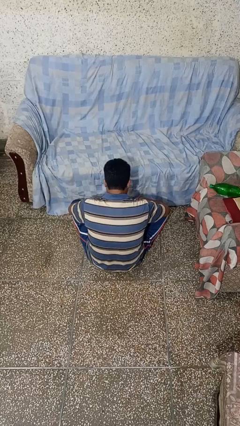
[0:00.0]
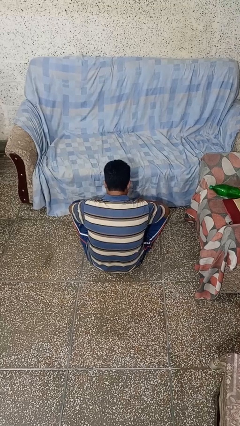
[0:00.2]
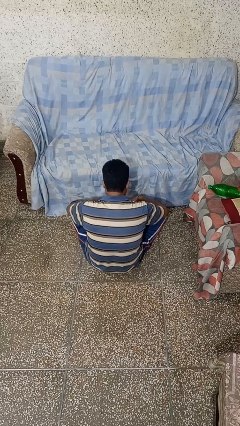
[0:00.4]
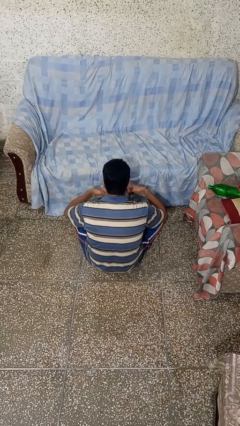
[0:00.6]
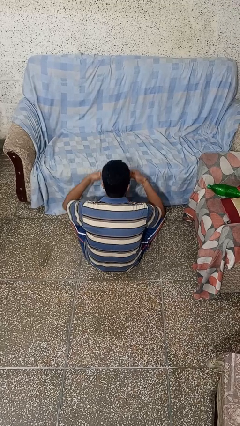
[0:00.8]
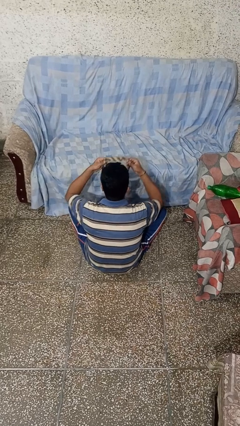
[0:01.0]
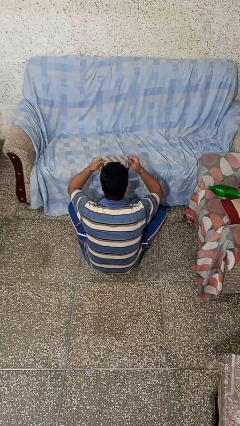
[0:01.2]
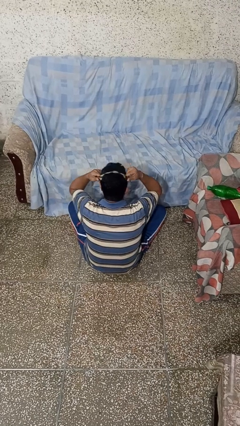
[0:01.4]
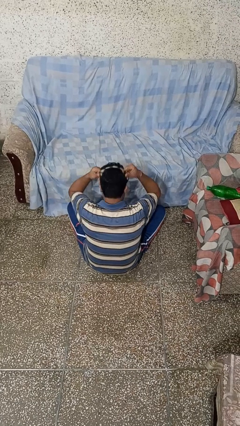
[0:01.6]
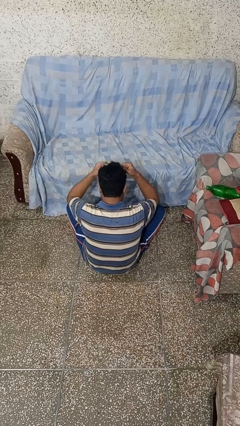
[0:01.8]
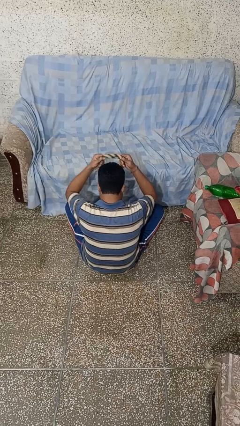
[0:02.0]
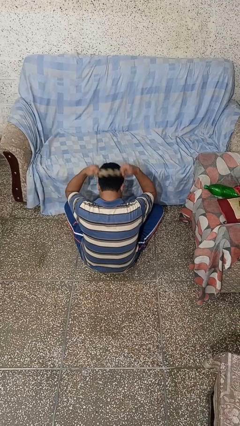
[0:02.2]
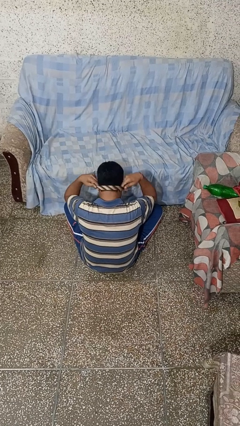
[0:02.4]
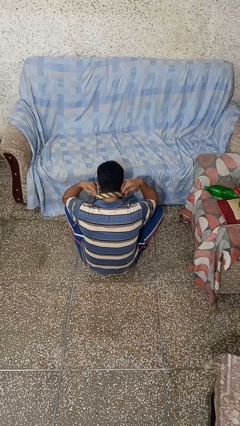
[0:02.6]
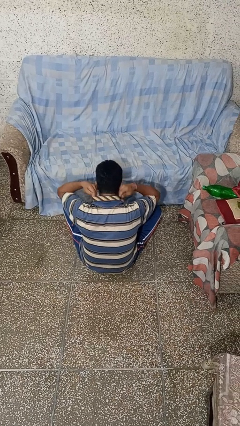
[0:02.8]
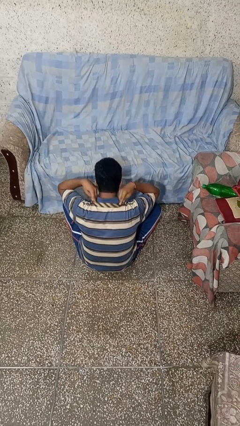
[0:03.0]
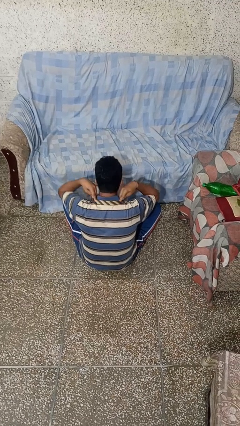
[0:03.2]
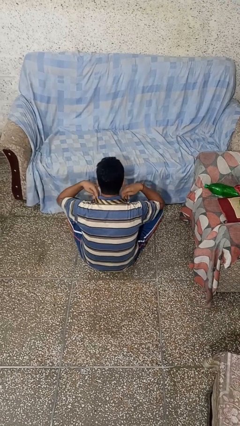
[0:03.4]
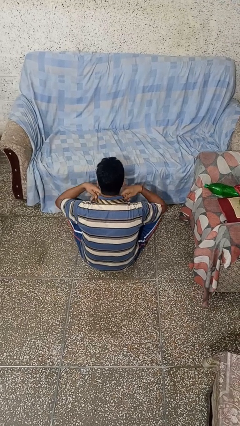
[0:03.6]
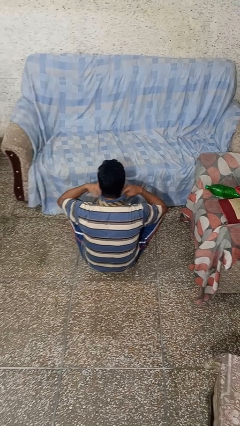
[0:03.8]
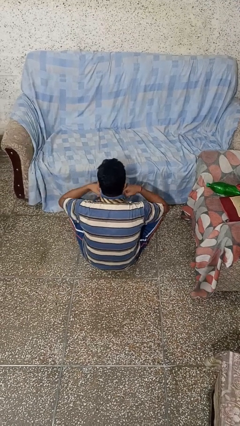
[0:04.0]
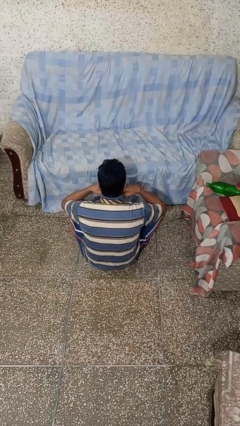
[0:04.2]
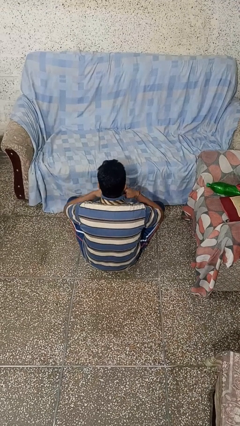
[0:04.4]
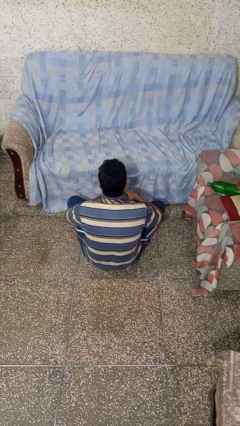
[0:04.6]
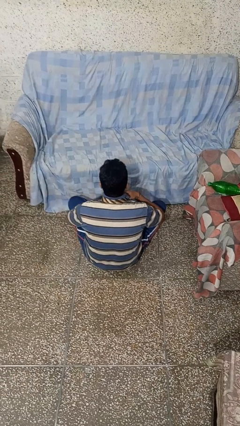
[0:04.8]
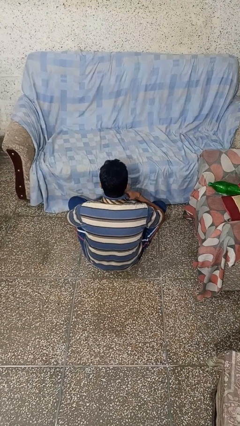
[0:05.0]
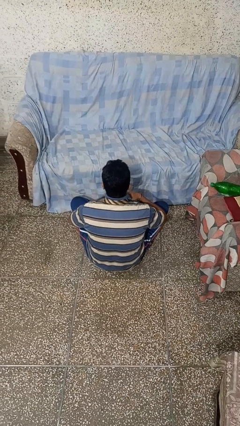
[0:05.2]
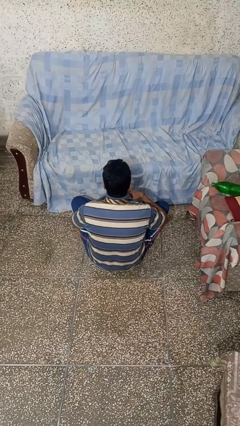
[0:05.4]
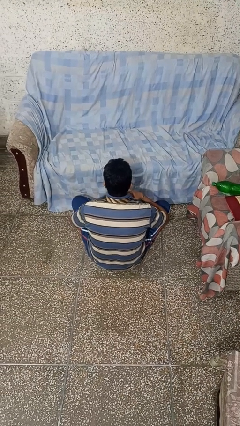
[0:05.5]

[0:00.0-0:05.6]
person puts on necktie

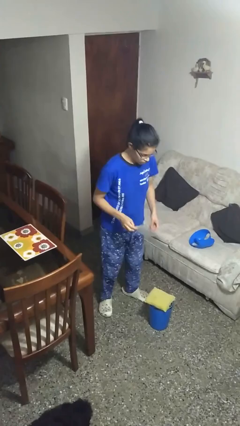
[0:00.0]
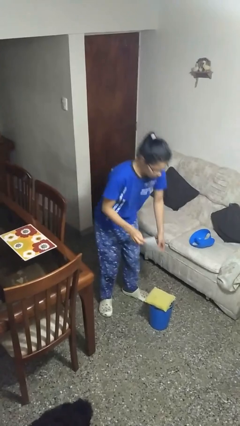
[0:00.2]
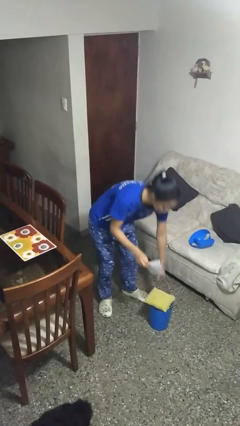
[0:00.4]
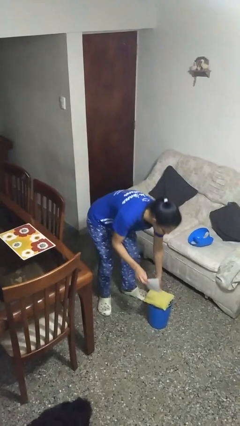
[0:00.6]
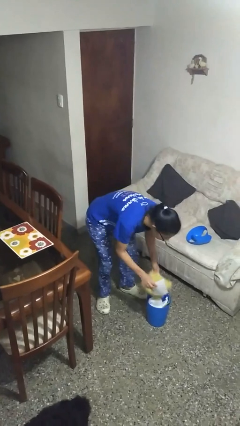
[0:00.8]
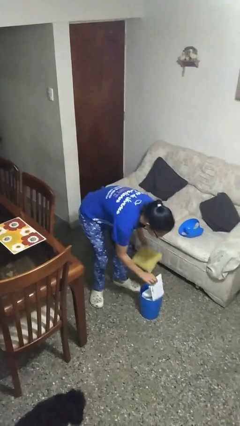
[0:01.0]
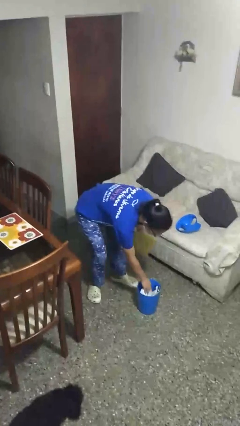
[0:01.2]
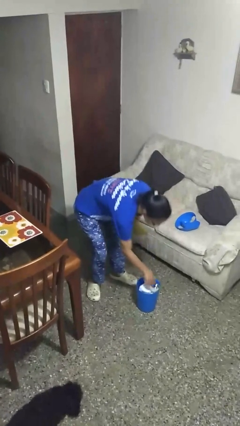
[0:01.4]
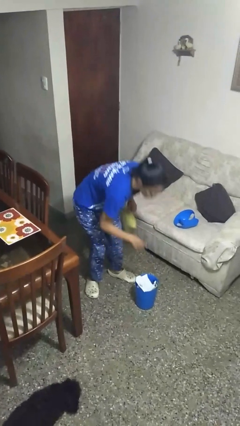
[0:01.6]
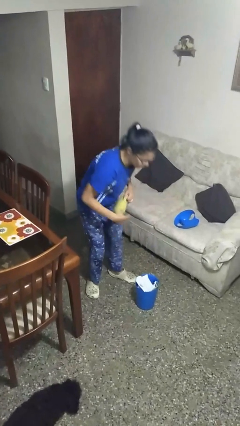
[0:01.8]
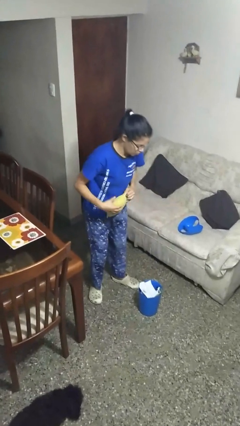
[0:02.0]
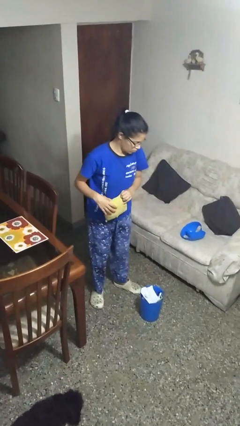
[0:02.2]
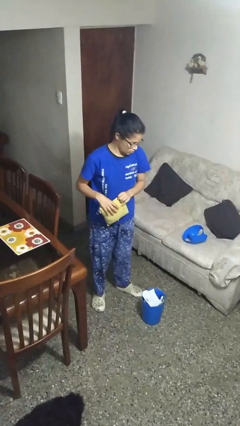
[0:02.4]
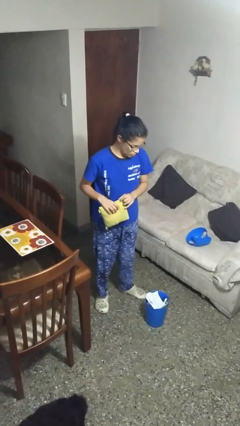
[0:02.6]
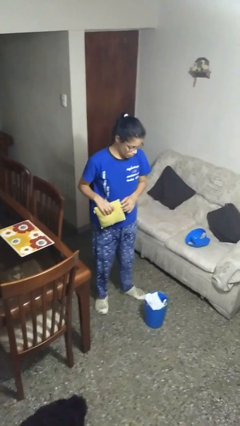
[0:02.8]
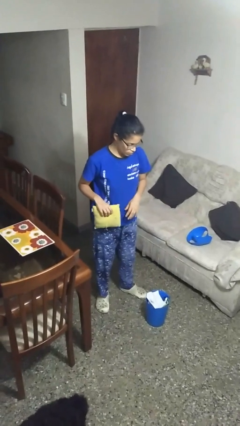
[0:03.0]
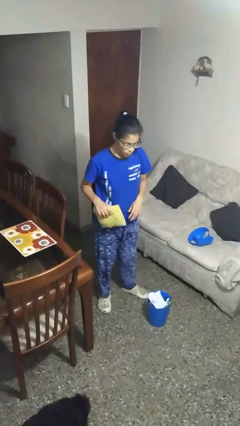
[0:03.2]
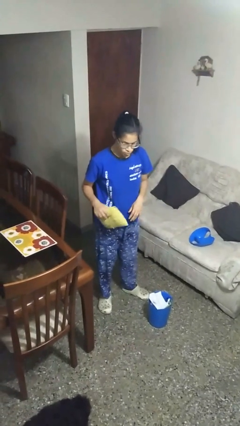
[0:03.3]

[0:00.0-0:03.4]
person discards trash

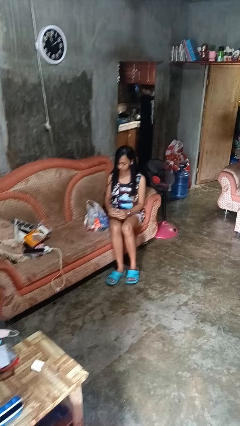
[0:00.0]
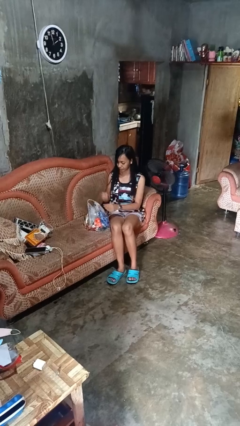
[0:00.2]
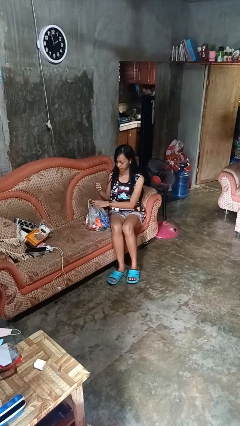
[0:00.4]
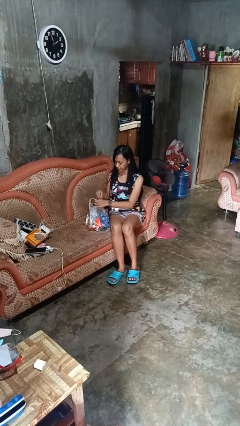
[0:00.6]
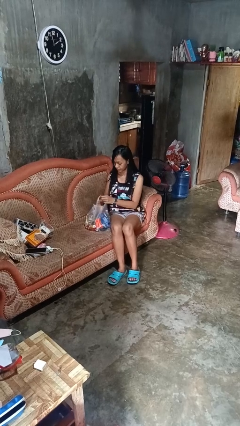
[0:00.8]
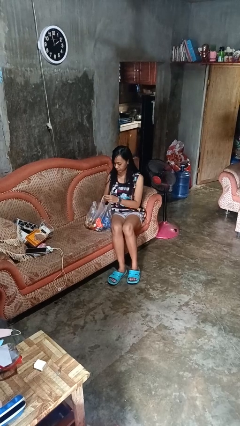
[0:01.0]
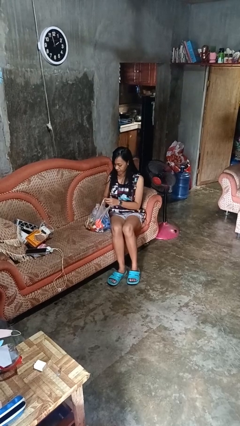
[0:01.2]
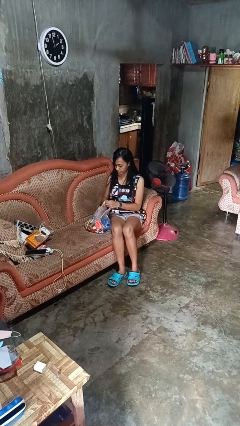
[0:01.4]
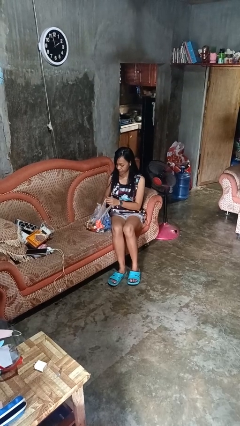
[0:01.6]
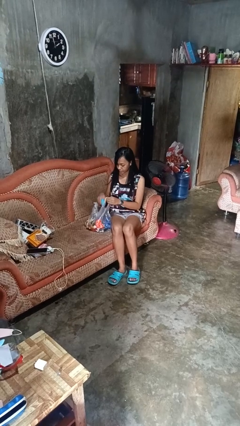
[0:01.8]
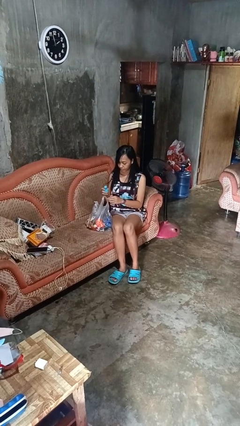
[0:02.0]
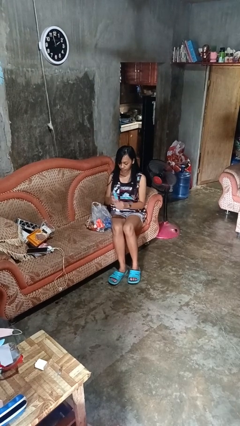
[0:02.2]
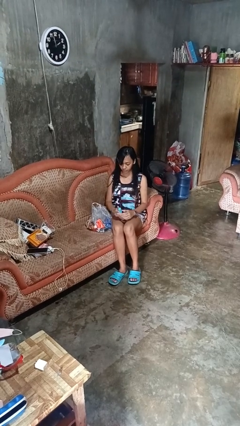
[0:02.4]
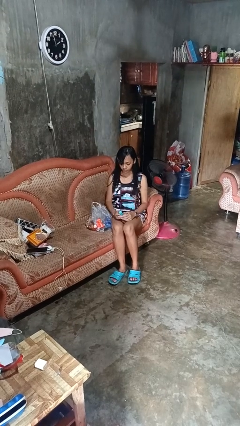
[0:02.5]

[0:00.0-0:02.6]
person takes object from bag

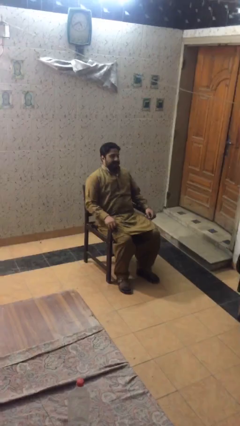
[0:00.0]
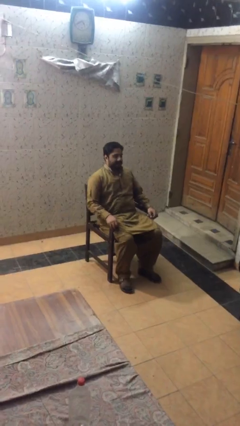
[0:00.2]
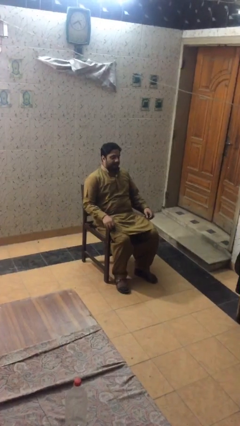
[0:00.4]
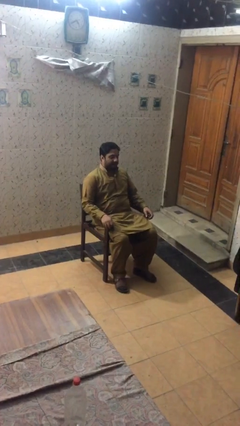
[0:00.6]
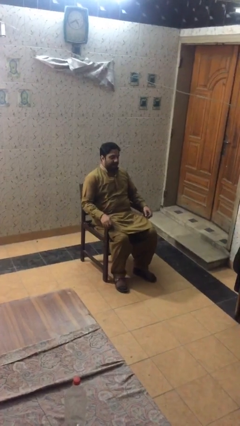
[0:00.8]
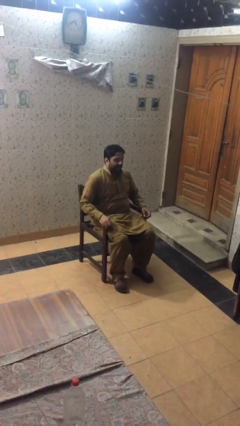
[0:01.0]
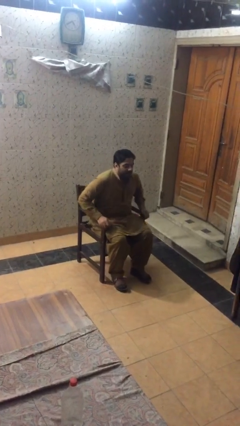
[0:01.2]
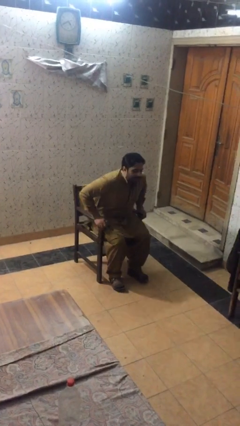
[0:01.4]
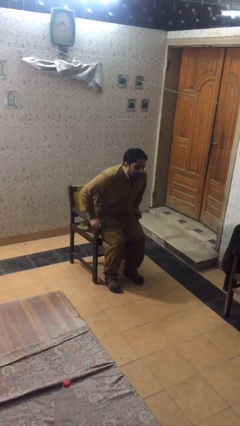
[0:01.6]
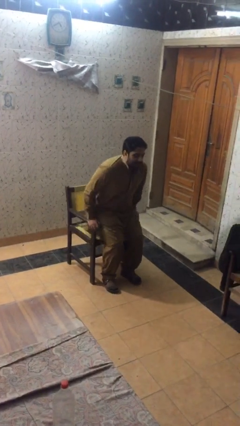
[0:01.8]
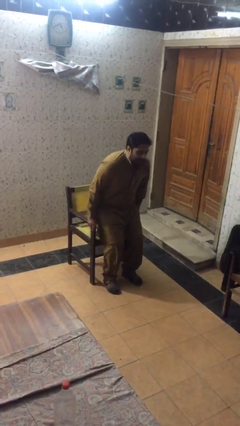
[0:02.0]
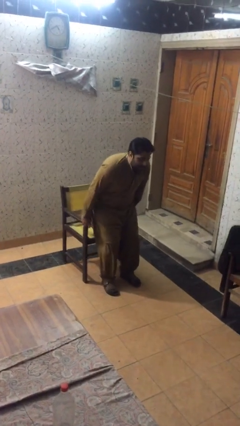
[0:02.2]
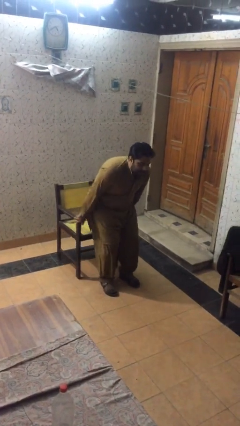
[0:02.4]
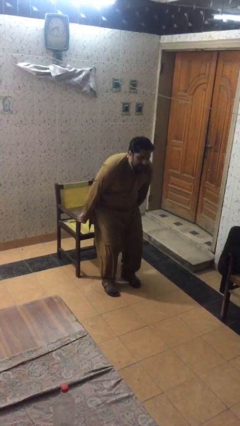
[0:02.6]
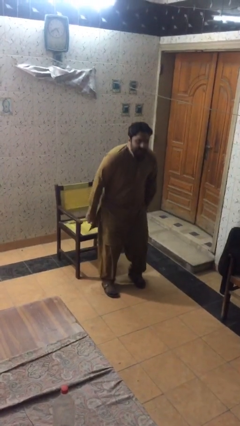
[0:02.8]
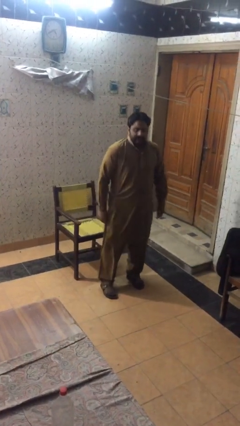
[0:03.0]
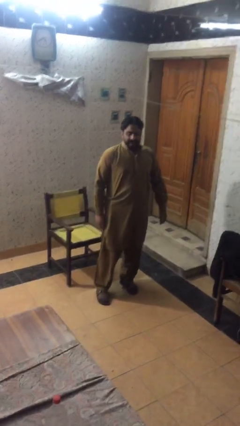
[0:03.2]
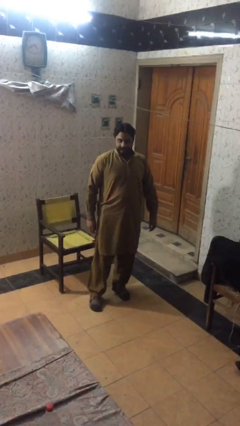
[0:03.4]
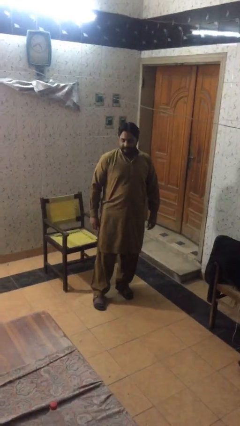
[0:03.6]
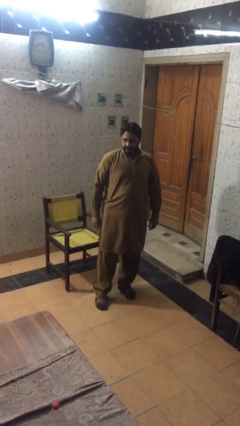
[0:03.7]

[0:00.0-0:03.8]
person stands up

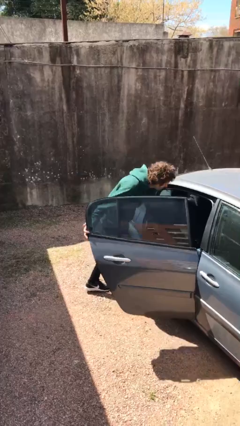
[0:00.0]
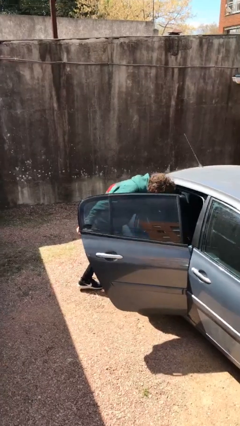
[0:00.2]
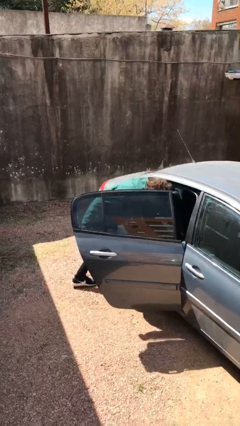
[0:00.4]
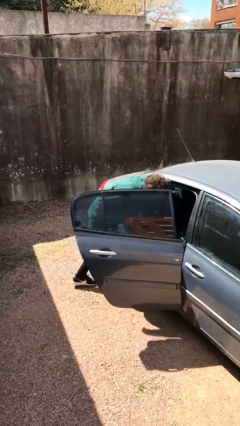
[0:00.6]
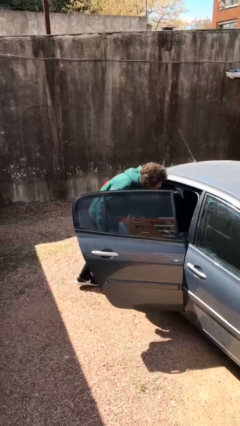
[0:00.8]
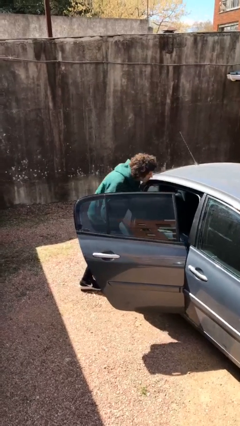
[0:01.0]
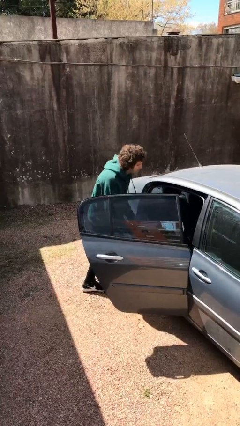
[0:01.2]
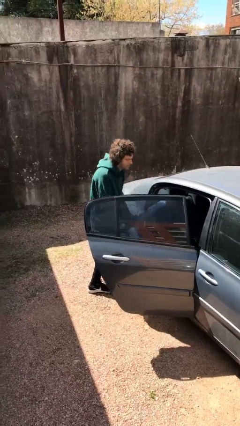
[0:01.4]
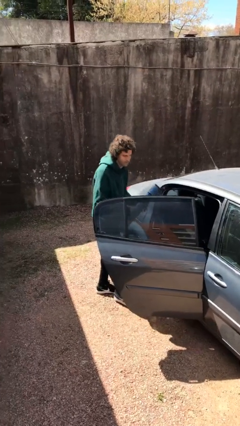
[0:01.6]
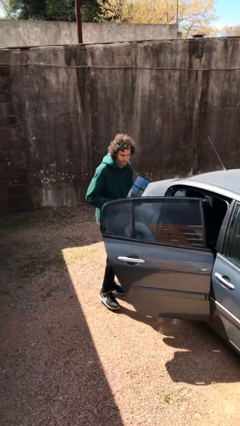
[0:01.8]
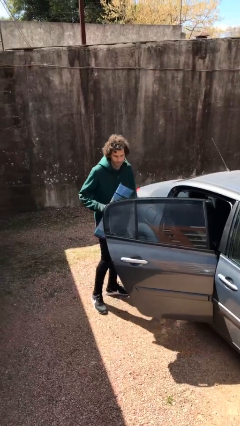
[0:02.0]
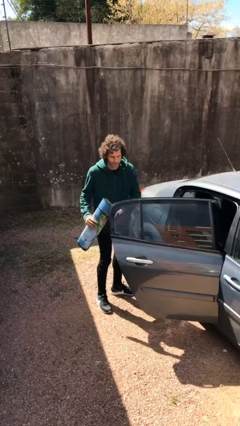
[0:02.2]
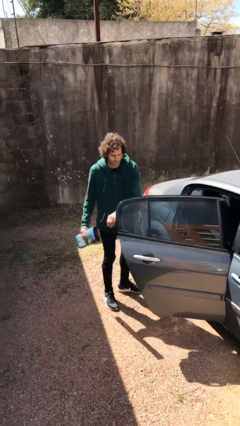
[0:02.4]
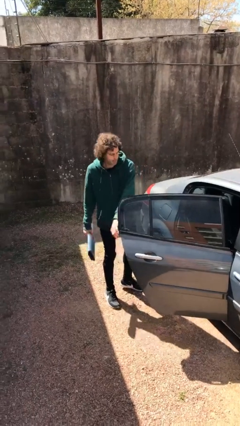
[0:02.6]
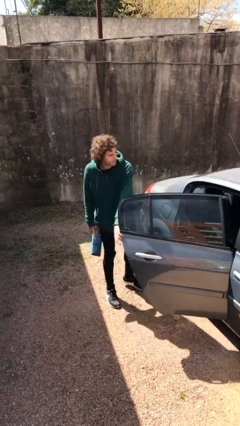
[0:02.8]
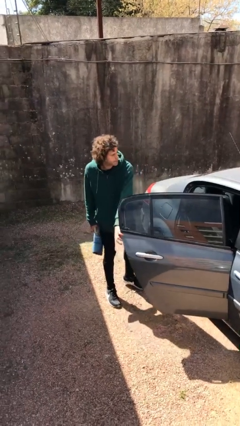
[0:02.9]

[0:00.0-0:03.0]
person unloads car
